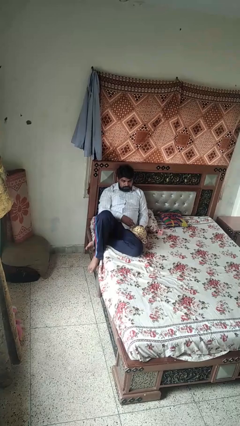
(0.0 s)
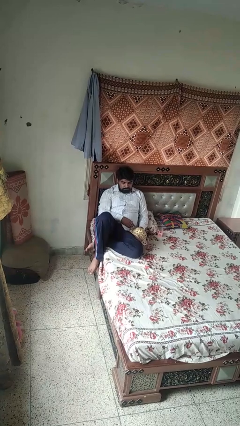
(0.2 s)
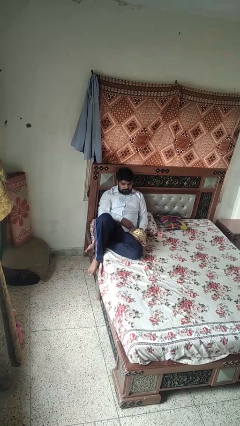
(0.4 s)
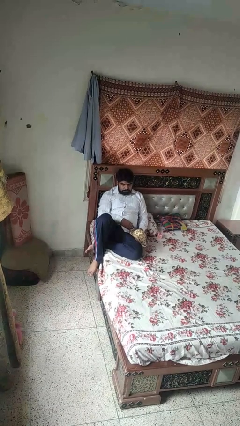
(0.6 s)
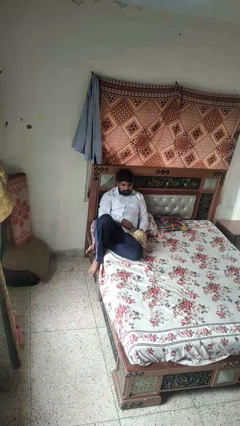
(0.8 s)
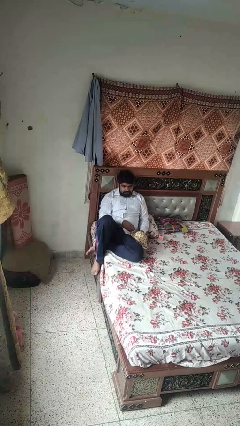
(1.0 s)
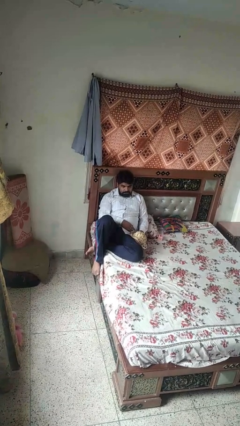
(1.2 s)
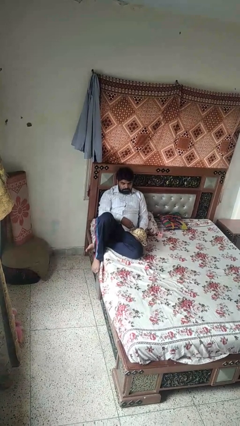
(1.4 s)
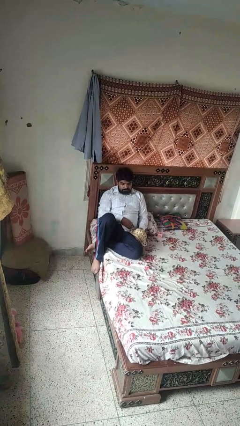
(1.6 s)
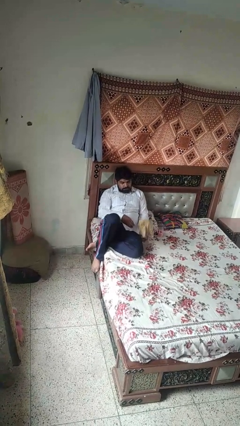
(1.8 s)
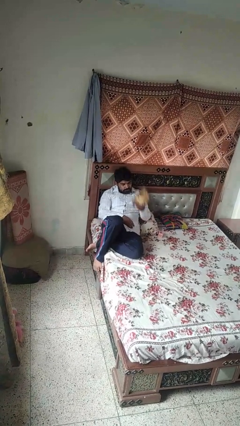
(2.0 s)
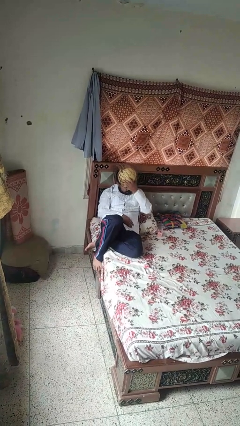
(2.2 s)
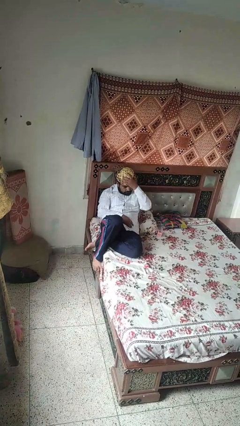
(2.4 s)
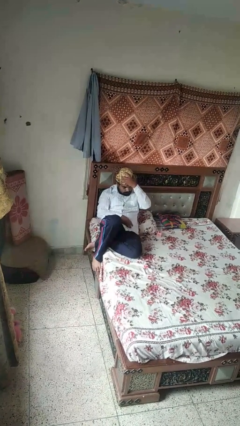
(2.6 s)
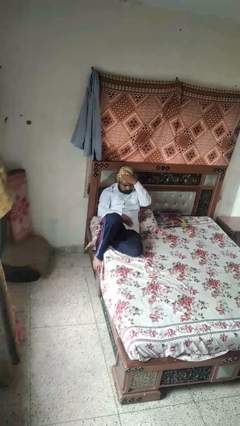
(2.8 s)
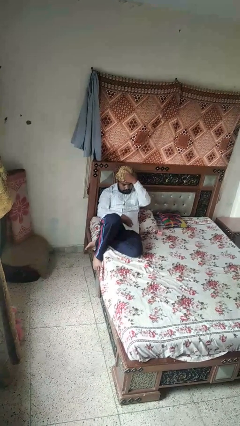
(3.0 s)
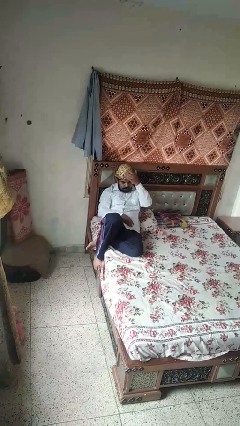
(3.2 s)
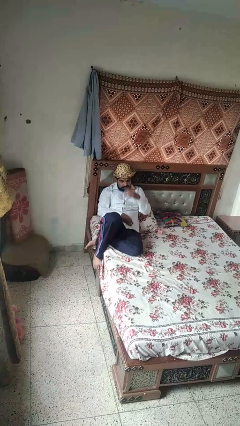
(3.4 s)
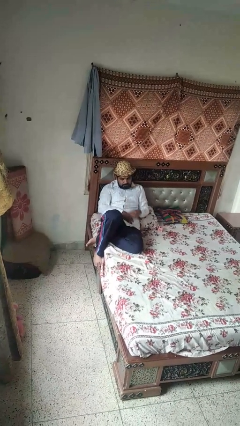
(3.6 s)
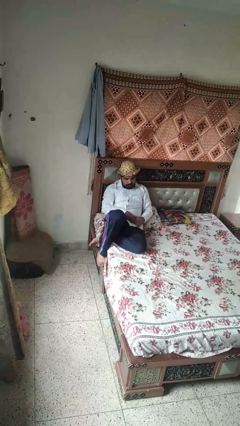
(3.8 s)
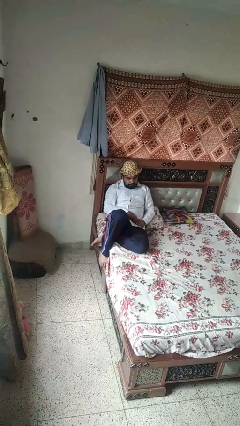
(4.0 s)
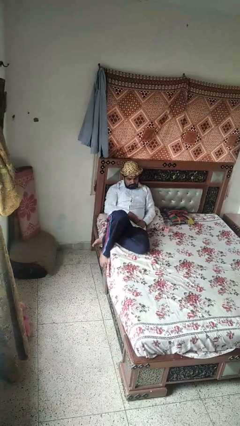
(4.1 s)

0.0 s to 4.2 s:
person puts on hat

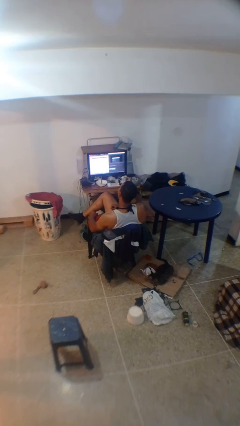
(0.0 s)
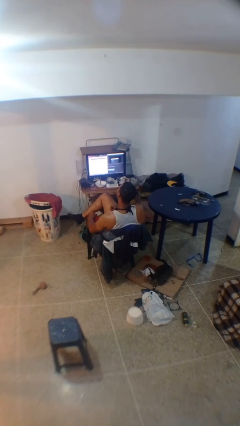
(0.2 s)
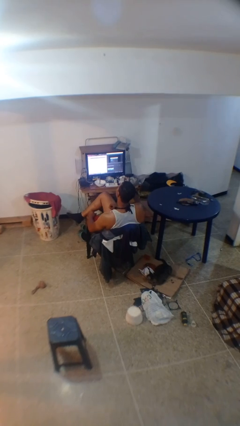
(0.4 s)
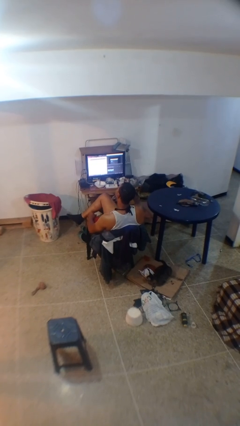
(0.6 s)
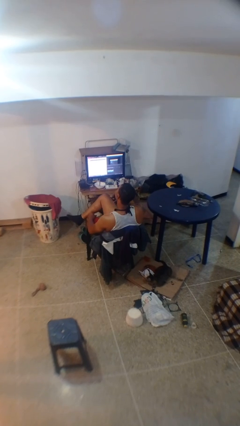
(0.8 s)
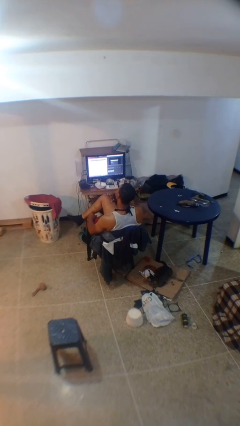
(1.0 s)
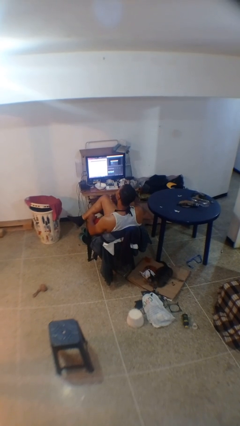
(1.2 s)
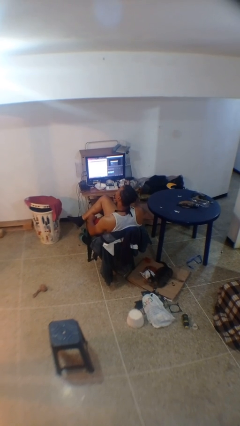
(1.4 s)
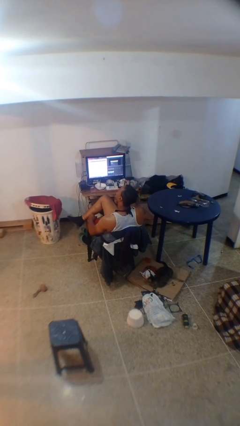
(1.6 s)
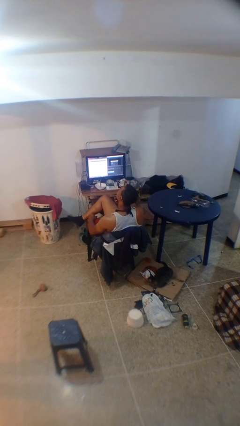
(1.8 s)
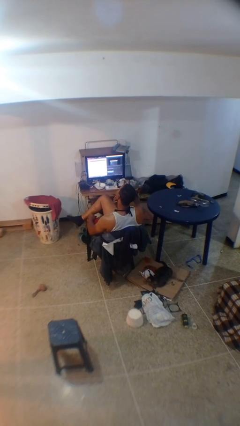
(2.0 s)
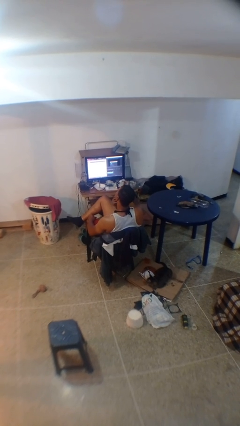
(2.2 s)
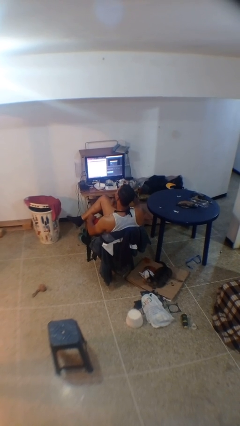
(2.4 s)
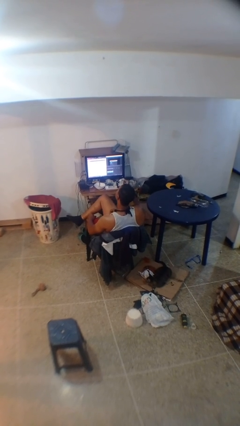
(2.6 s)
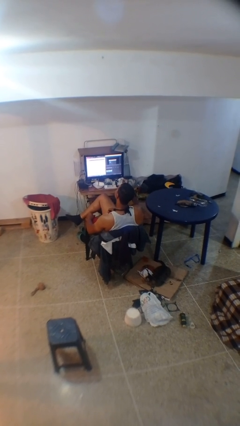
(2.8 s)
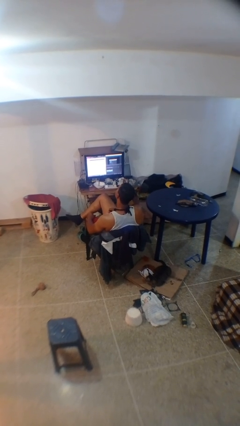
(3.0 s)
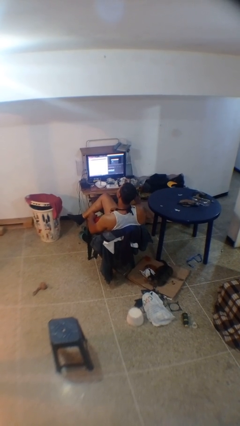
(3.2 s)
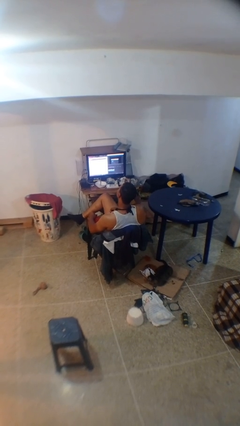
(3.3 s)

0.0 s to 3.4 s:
person strokes chin

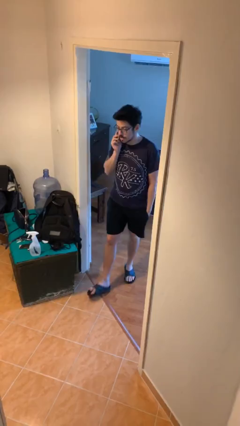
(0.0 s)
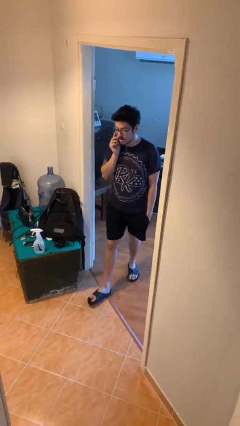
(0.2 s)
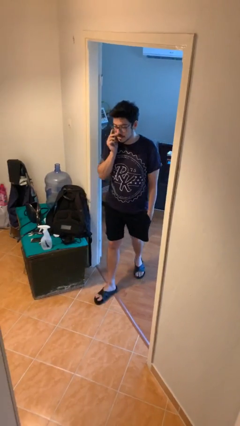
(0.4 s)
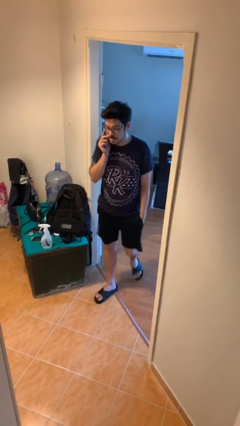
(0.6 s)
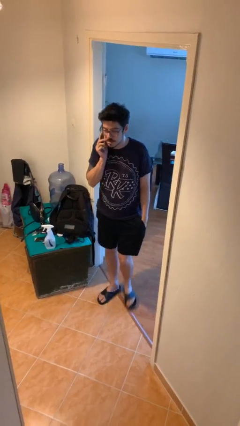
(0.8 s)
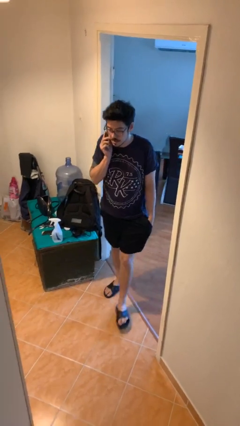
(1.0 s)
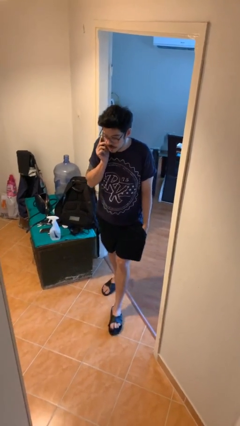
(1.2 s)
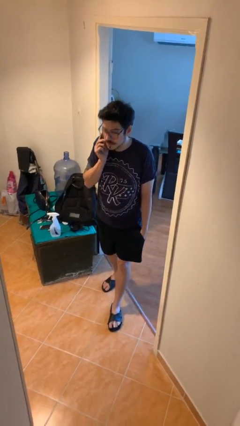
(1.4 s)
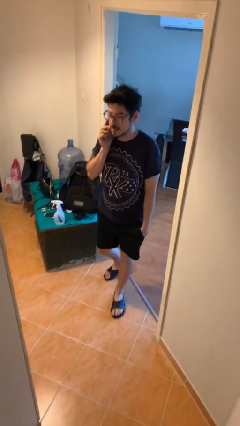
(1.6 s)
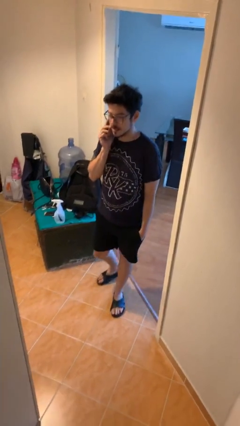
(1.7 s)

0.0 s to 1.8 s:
person enters scene through structure

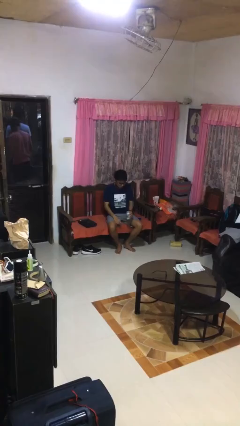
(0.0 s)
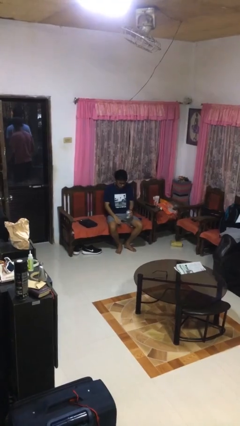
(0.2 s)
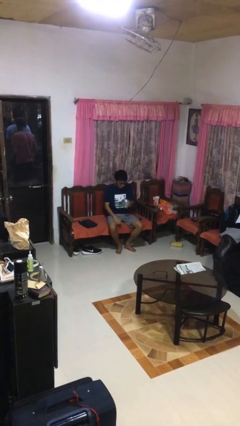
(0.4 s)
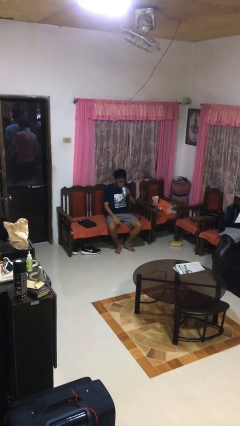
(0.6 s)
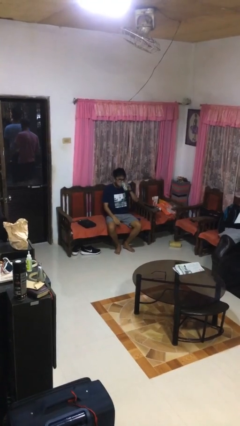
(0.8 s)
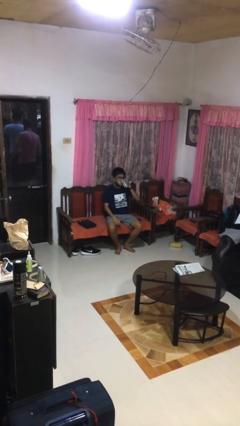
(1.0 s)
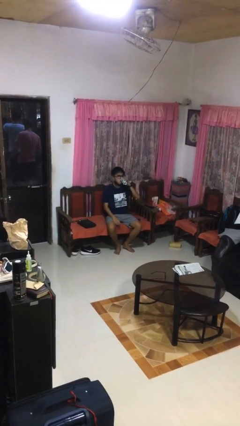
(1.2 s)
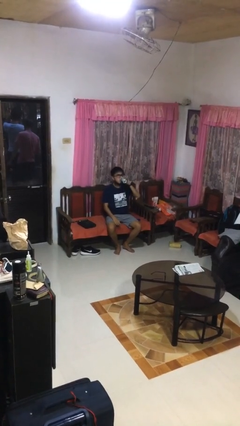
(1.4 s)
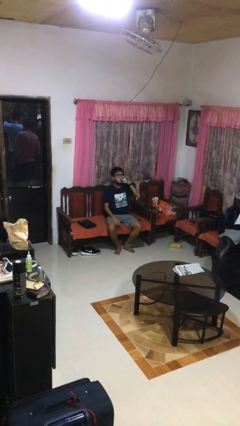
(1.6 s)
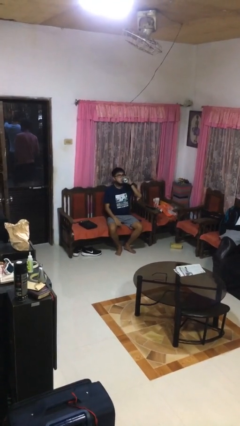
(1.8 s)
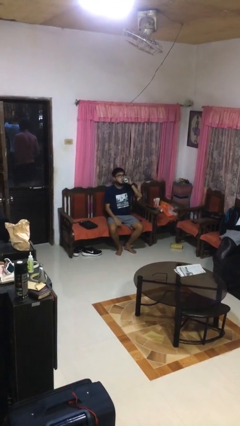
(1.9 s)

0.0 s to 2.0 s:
person drinks from beverage can

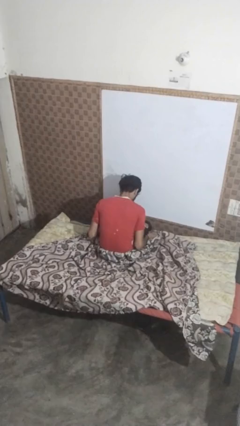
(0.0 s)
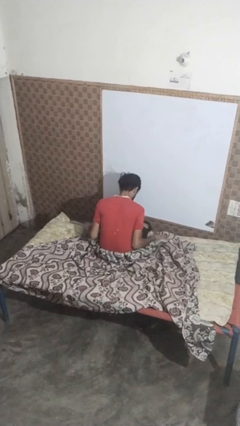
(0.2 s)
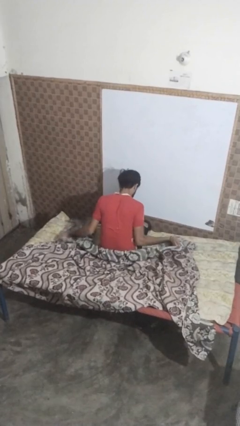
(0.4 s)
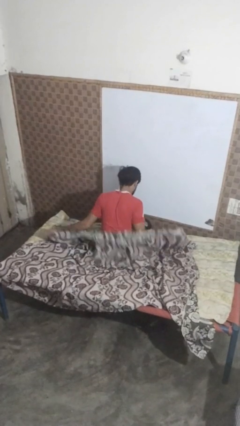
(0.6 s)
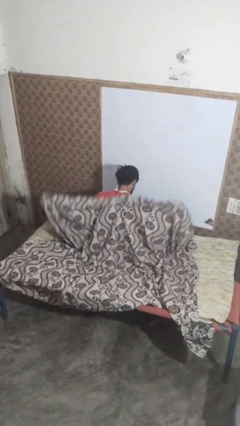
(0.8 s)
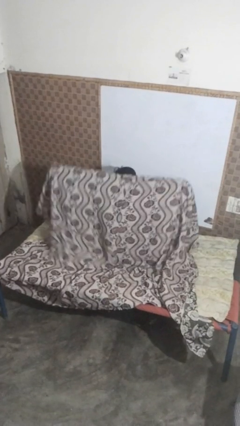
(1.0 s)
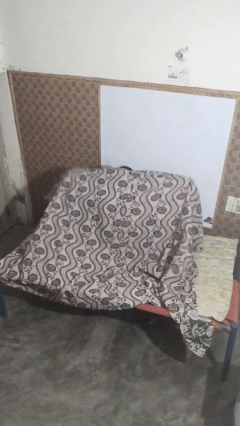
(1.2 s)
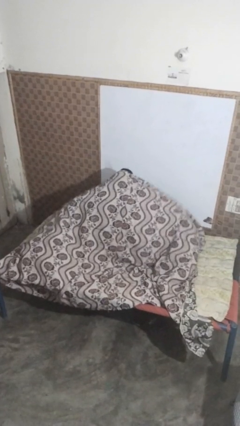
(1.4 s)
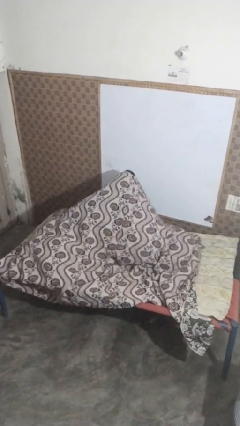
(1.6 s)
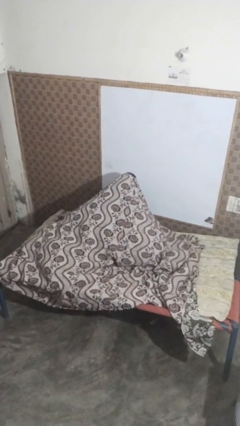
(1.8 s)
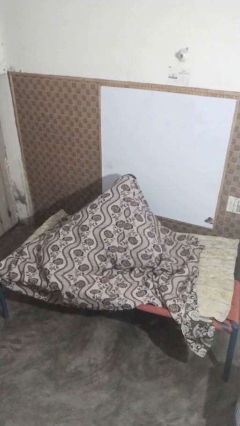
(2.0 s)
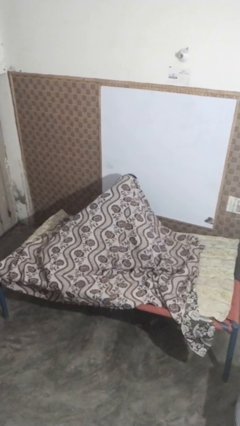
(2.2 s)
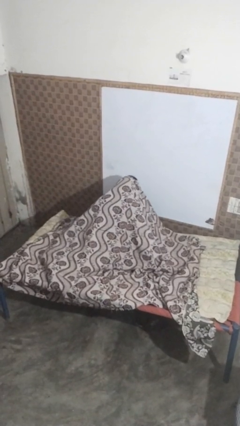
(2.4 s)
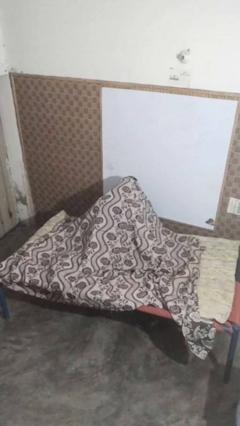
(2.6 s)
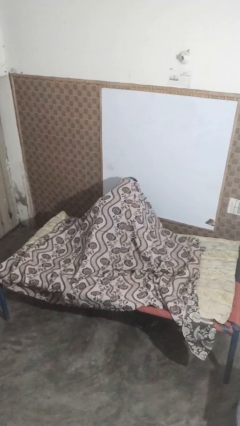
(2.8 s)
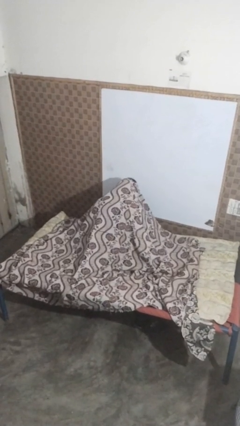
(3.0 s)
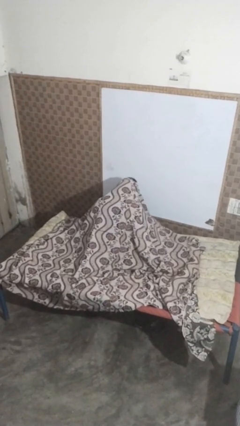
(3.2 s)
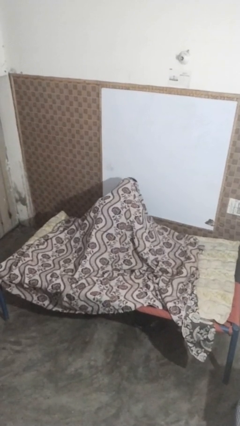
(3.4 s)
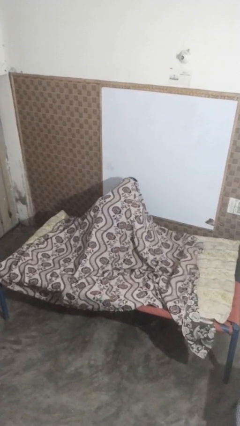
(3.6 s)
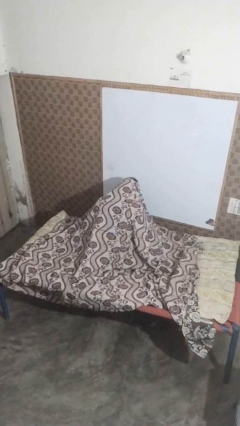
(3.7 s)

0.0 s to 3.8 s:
person covers with blanket

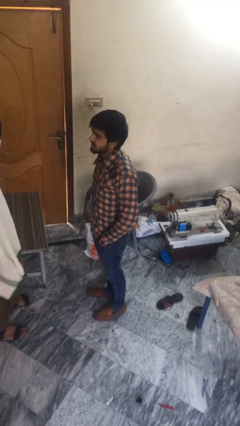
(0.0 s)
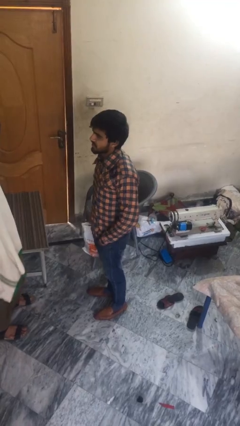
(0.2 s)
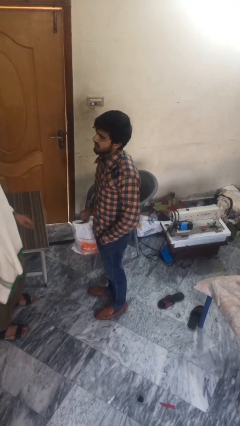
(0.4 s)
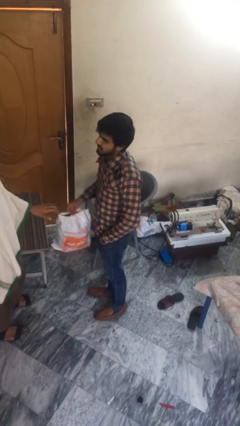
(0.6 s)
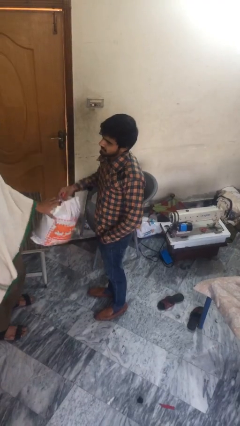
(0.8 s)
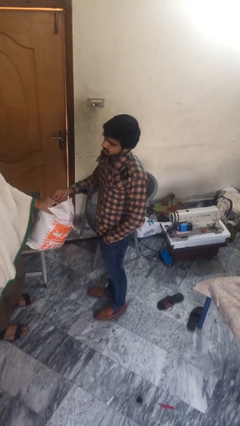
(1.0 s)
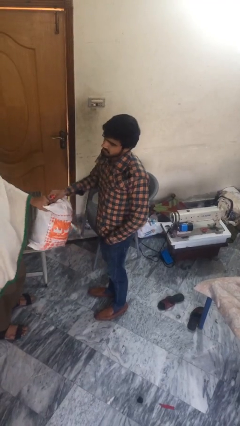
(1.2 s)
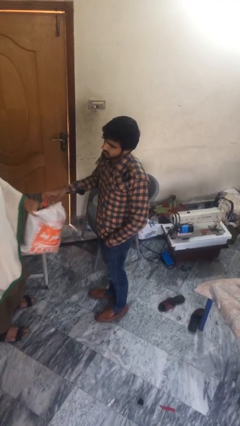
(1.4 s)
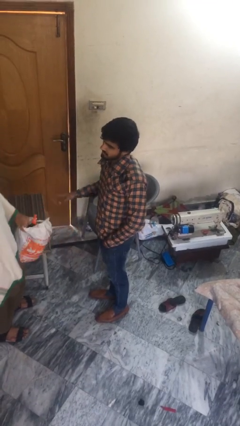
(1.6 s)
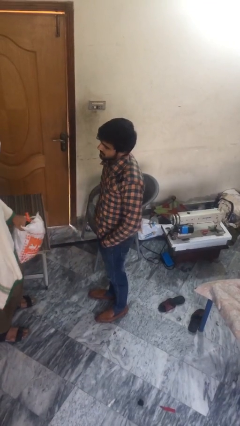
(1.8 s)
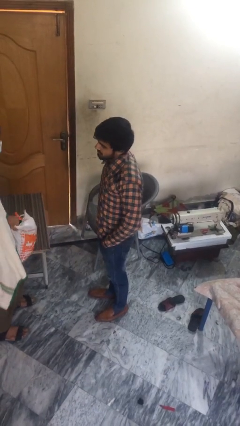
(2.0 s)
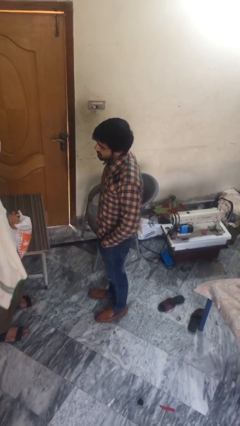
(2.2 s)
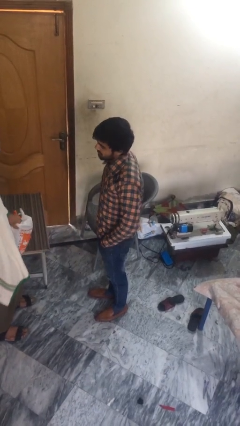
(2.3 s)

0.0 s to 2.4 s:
person transfers object to person
